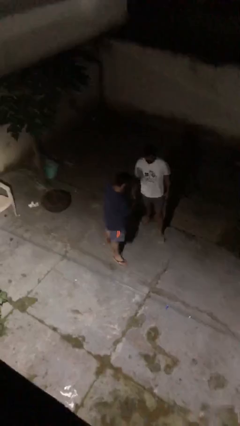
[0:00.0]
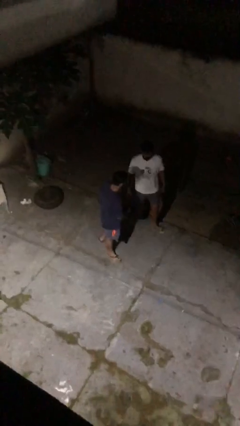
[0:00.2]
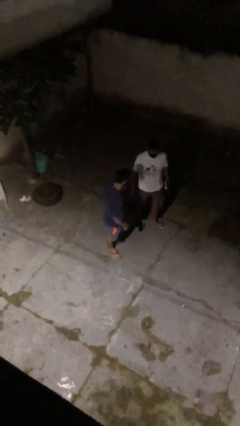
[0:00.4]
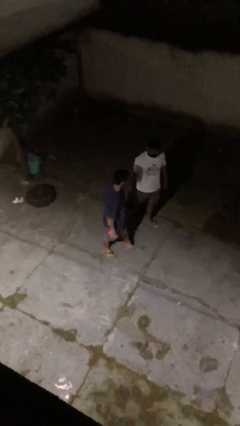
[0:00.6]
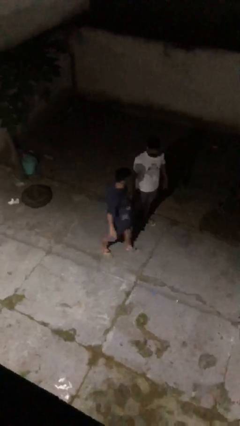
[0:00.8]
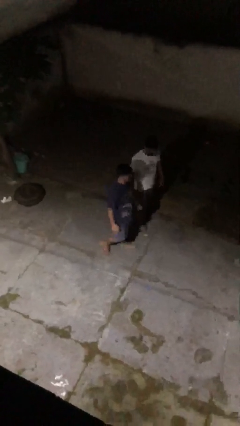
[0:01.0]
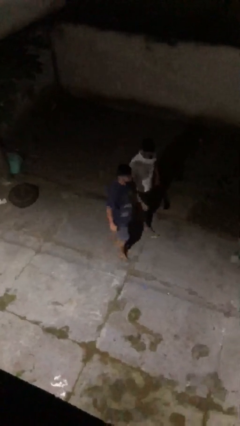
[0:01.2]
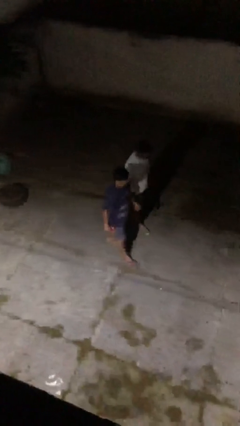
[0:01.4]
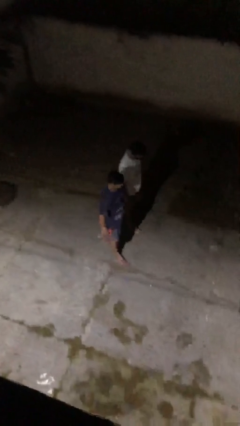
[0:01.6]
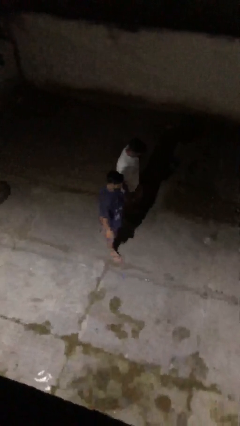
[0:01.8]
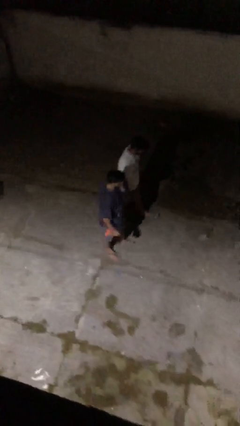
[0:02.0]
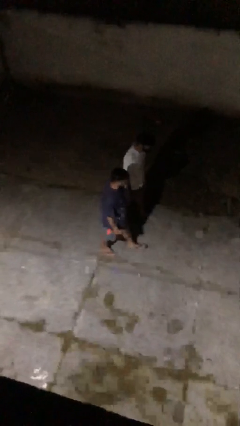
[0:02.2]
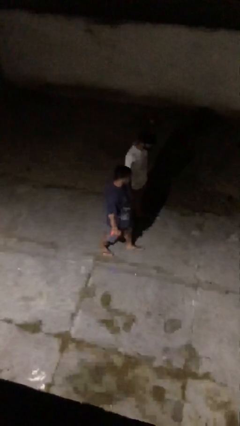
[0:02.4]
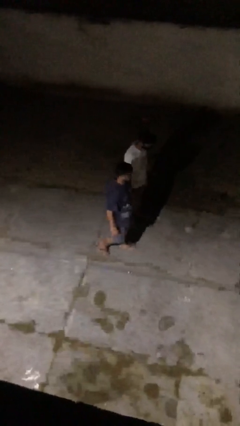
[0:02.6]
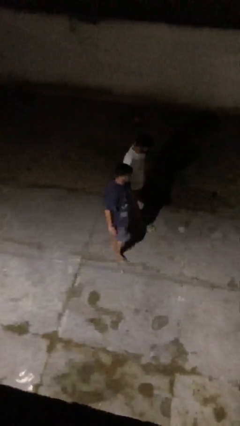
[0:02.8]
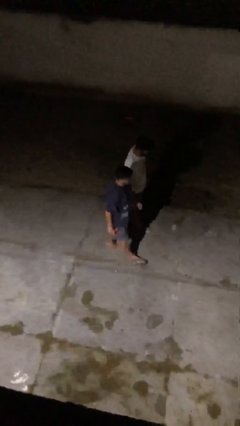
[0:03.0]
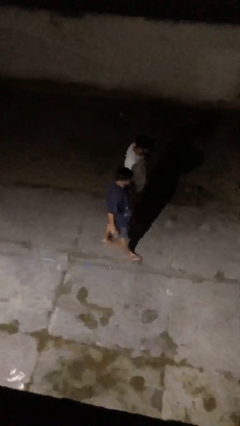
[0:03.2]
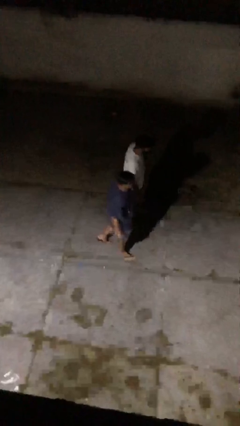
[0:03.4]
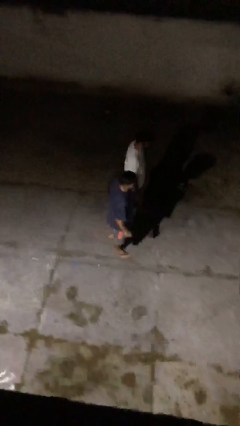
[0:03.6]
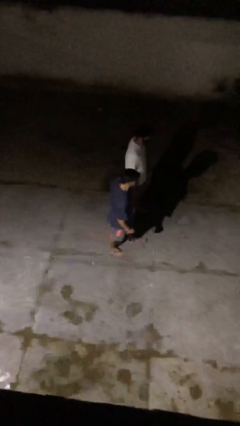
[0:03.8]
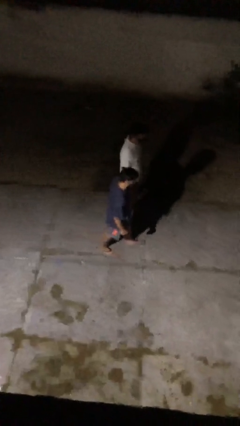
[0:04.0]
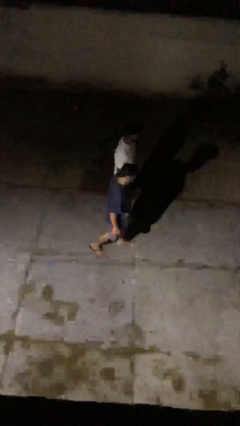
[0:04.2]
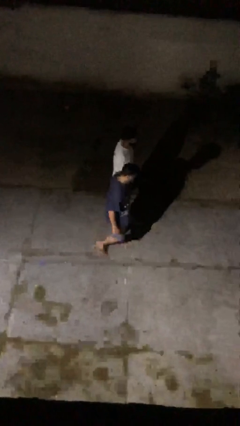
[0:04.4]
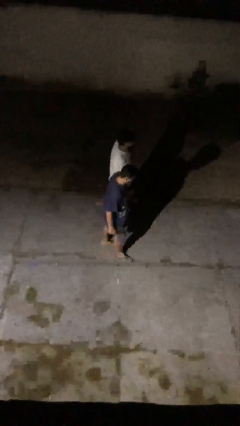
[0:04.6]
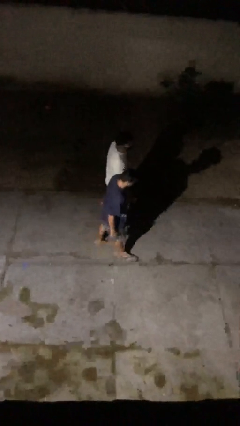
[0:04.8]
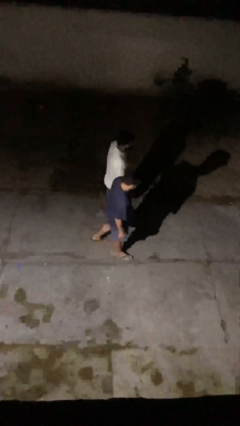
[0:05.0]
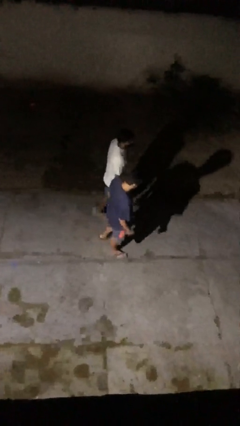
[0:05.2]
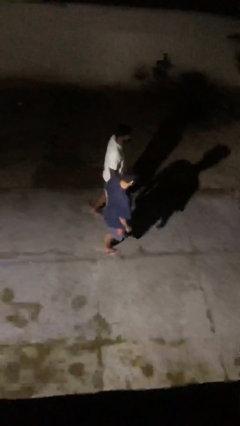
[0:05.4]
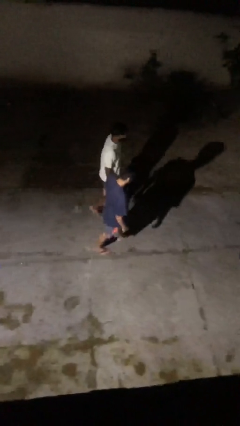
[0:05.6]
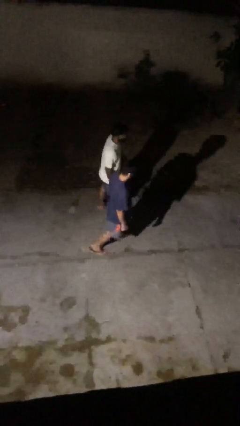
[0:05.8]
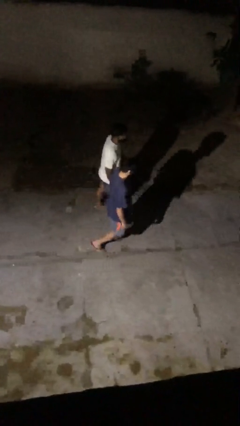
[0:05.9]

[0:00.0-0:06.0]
person talks to person

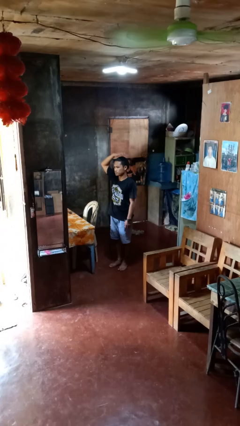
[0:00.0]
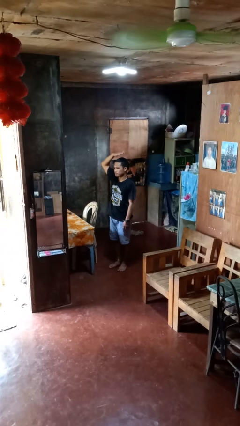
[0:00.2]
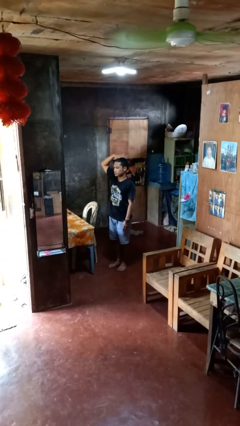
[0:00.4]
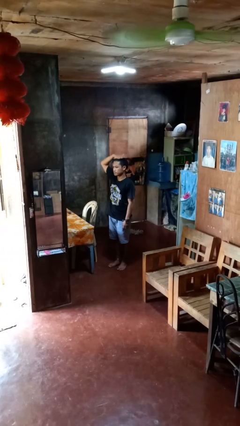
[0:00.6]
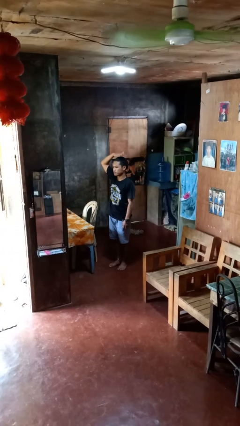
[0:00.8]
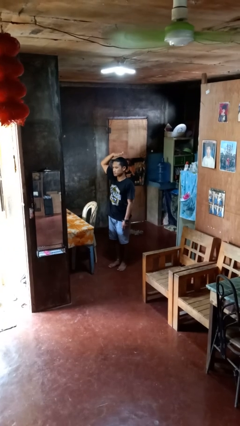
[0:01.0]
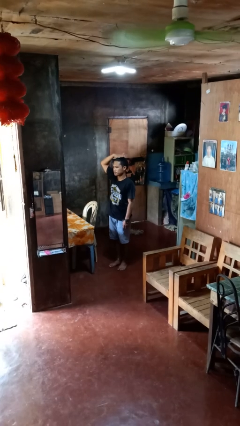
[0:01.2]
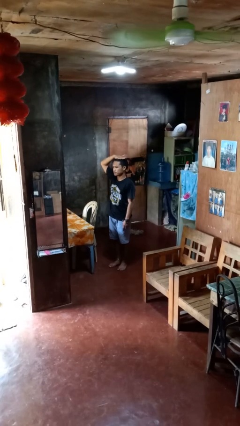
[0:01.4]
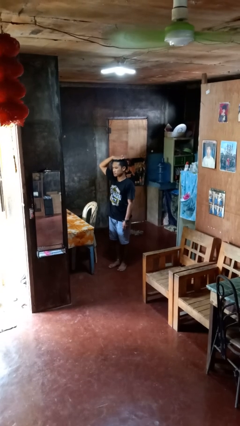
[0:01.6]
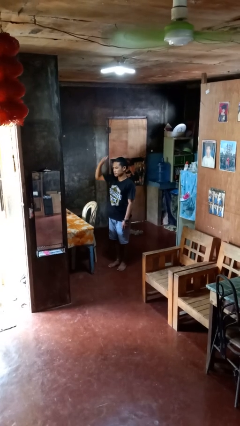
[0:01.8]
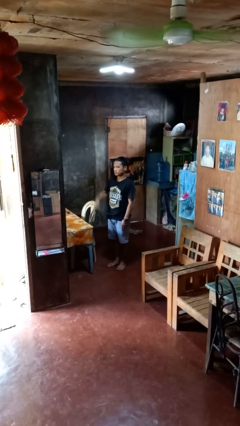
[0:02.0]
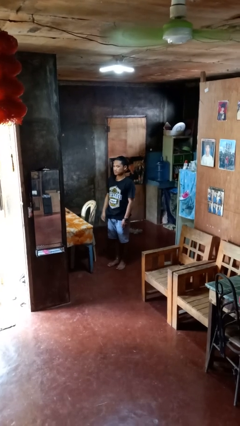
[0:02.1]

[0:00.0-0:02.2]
person pats head

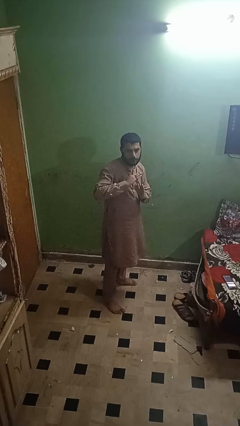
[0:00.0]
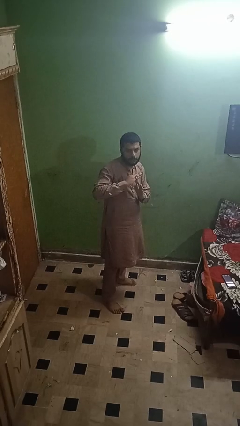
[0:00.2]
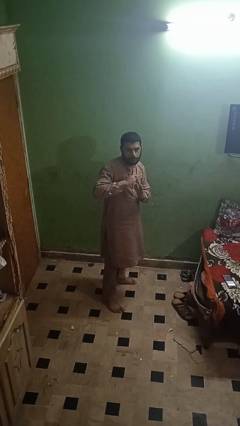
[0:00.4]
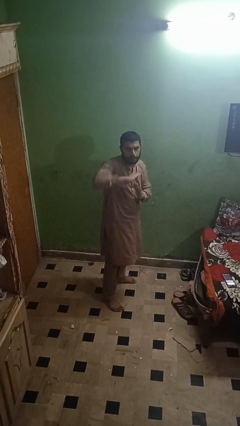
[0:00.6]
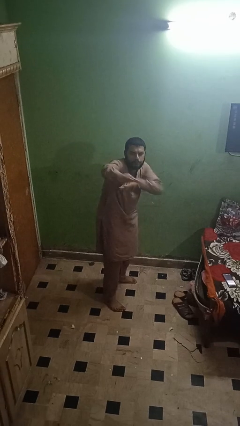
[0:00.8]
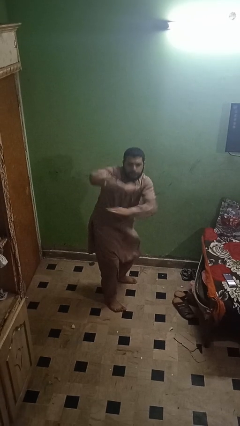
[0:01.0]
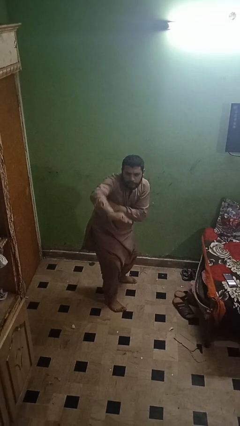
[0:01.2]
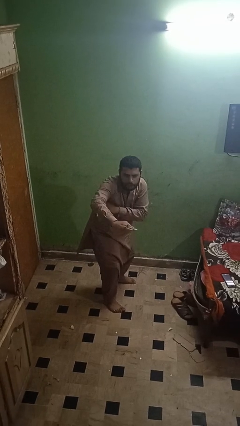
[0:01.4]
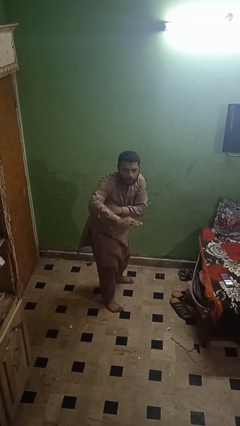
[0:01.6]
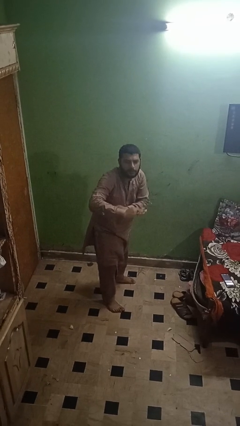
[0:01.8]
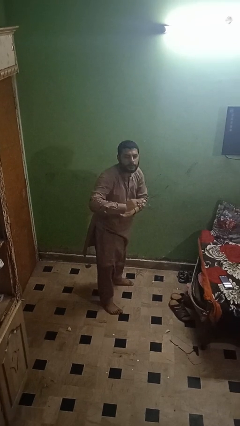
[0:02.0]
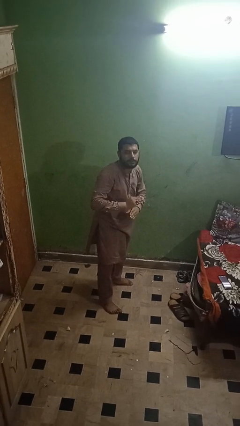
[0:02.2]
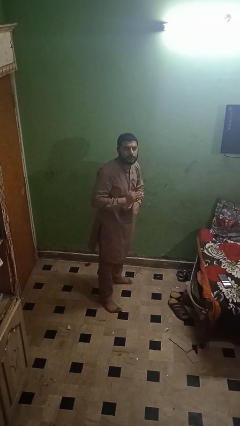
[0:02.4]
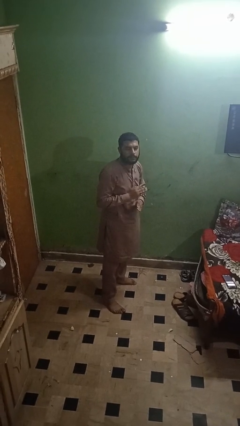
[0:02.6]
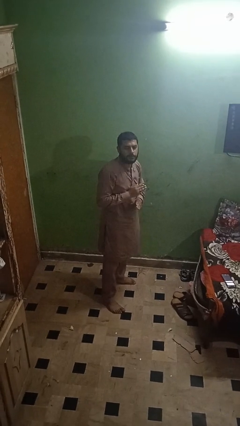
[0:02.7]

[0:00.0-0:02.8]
person karate chop

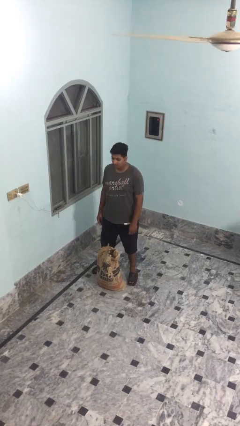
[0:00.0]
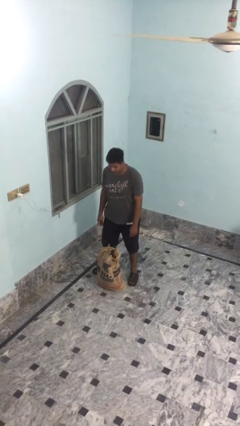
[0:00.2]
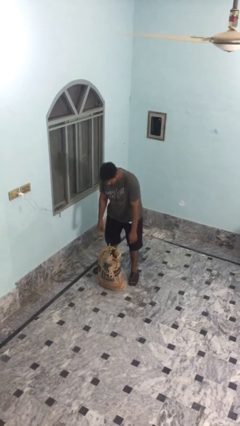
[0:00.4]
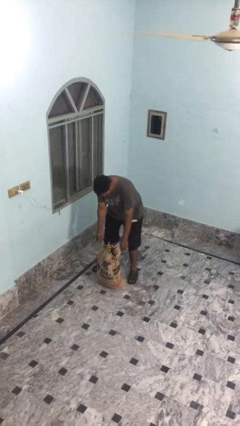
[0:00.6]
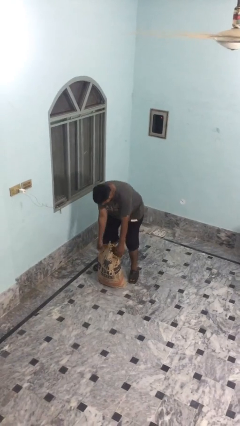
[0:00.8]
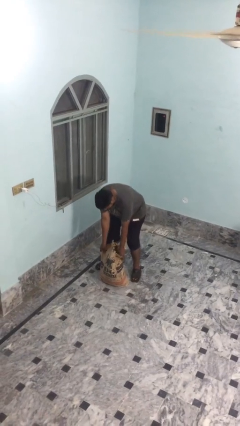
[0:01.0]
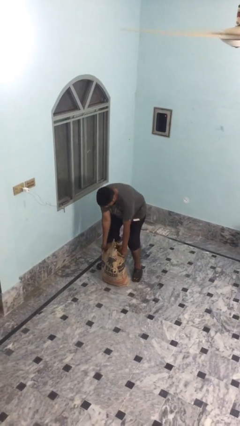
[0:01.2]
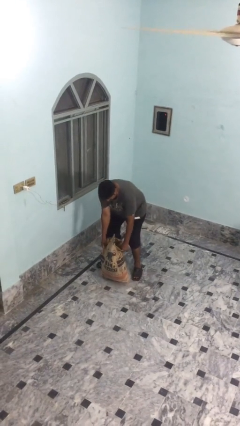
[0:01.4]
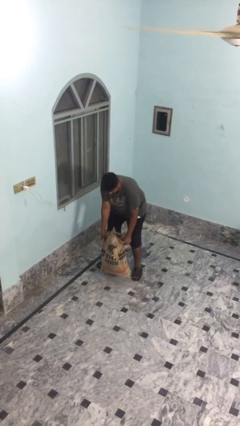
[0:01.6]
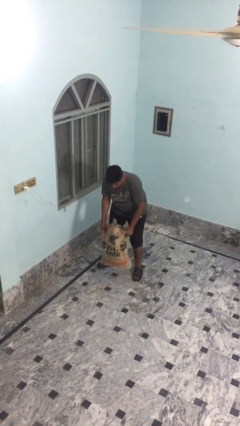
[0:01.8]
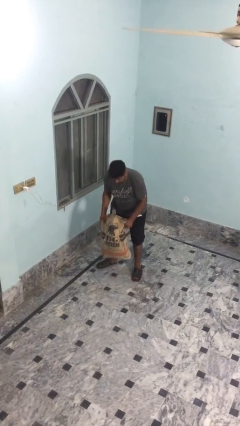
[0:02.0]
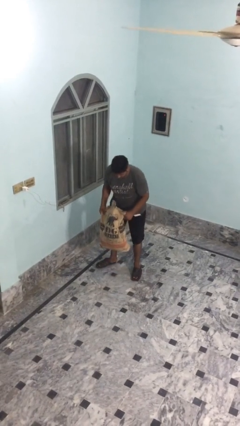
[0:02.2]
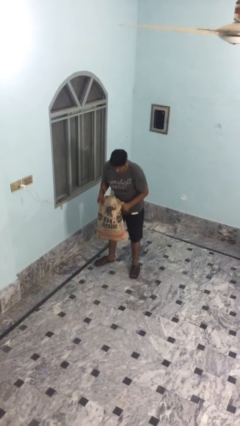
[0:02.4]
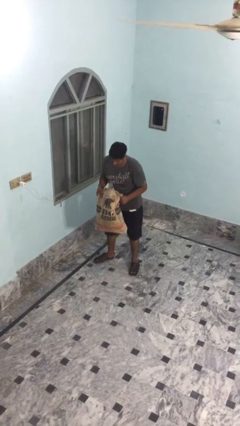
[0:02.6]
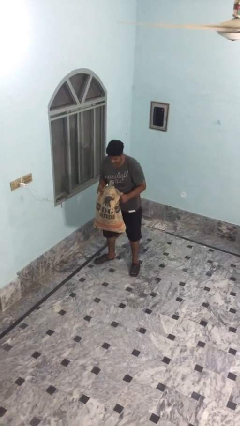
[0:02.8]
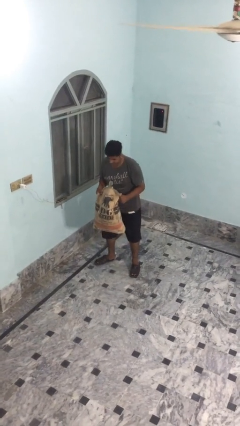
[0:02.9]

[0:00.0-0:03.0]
person picks up object from floor

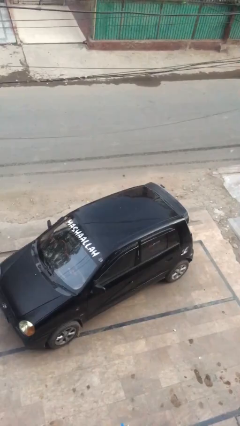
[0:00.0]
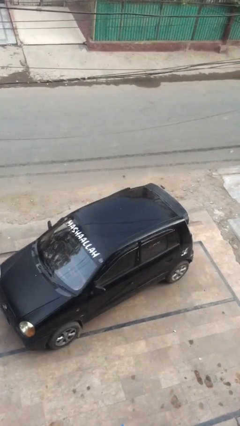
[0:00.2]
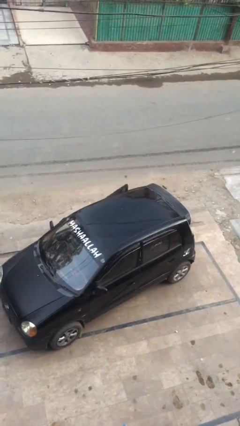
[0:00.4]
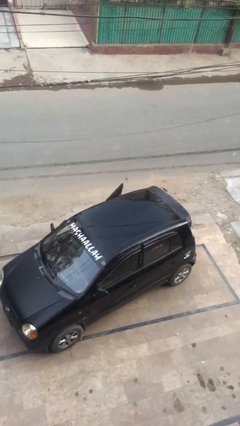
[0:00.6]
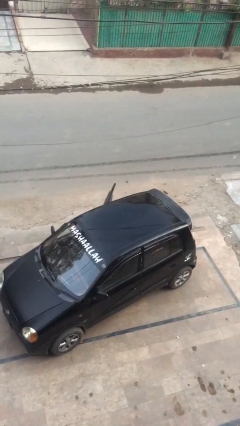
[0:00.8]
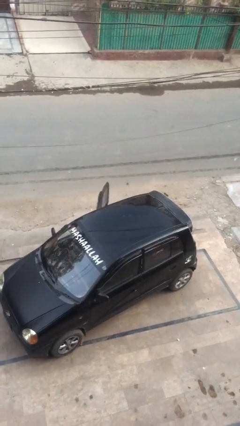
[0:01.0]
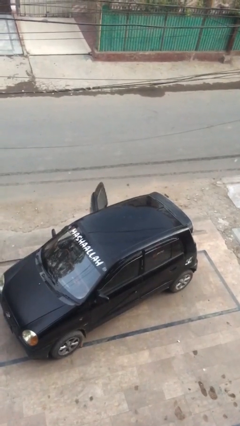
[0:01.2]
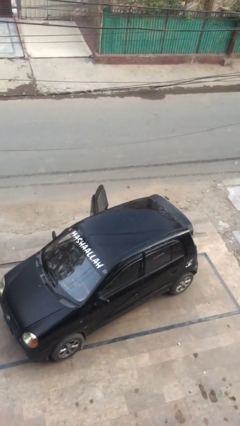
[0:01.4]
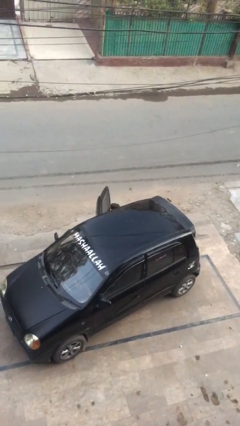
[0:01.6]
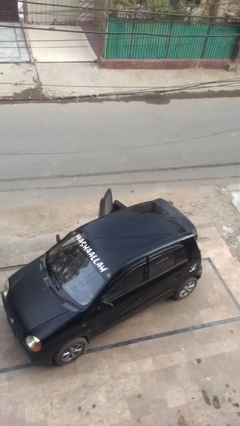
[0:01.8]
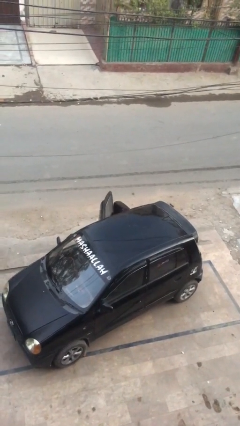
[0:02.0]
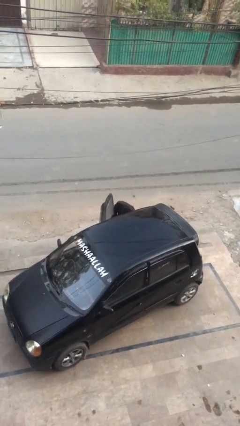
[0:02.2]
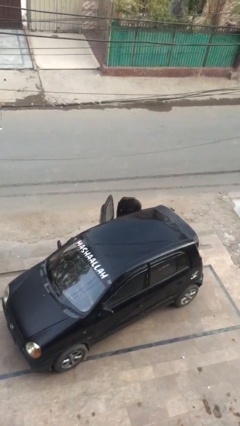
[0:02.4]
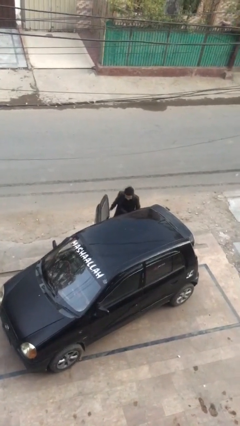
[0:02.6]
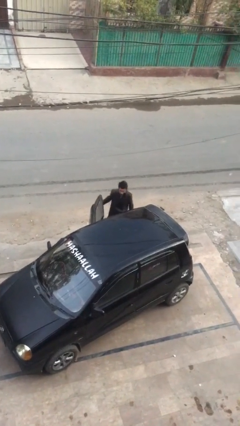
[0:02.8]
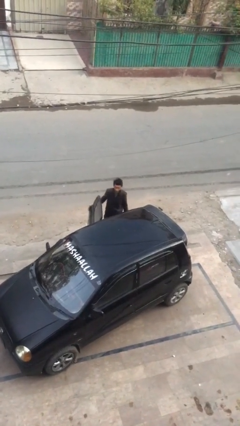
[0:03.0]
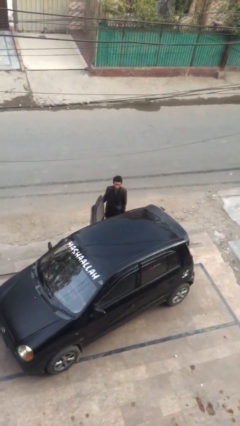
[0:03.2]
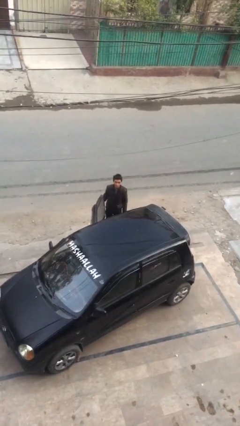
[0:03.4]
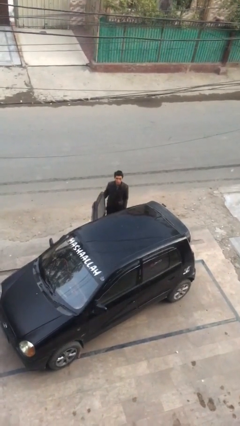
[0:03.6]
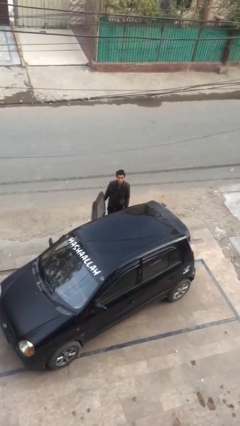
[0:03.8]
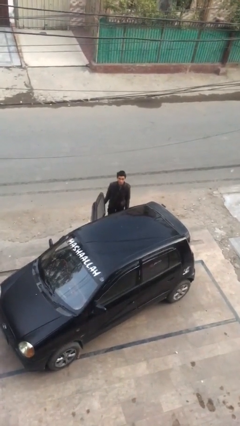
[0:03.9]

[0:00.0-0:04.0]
person exits car
